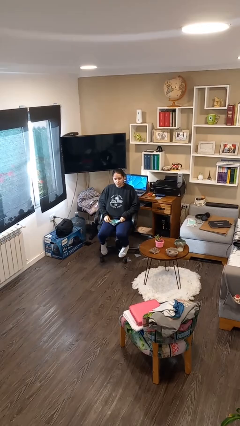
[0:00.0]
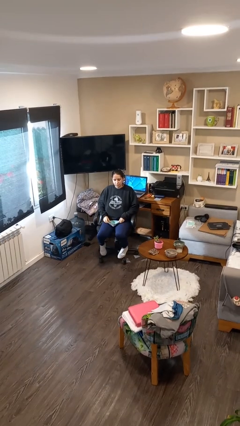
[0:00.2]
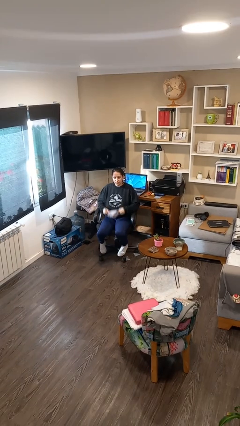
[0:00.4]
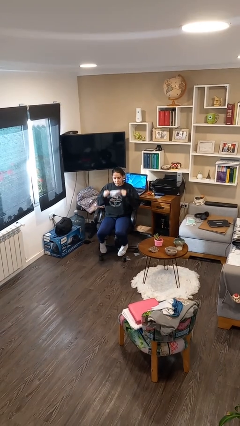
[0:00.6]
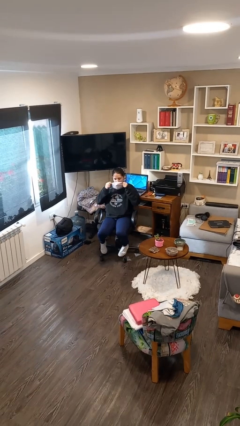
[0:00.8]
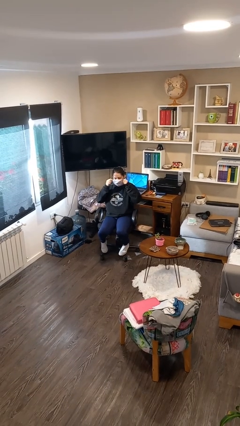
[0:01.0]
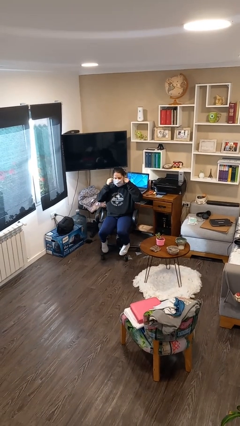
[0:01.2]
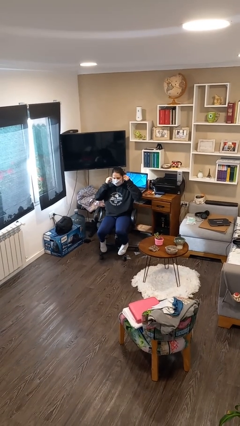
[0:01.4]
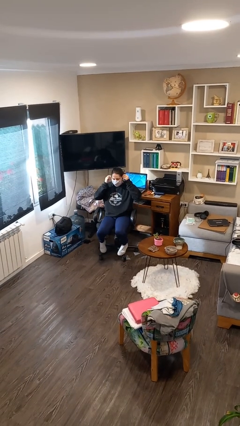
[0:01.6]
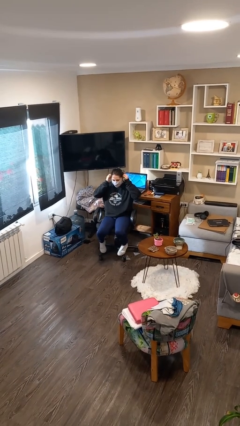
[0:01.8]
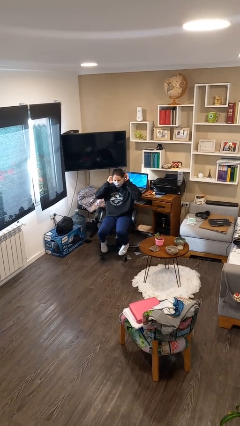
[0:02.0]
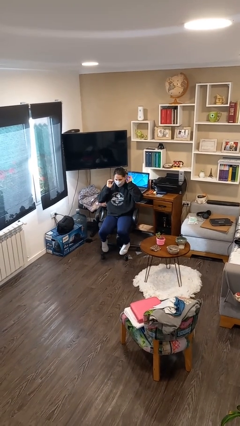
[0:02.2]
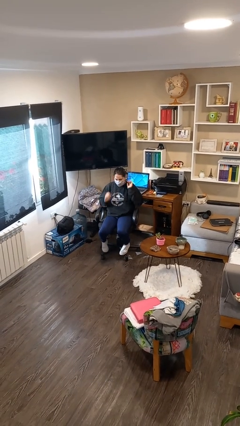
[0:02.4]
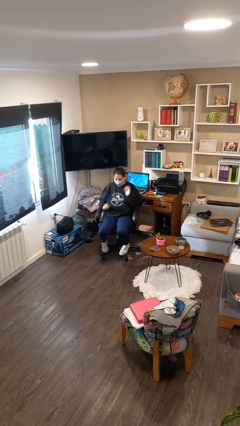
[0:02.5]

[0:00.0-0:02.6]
person puts on facemask

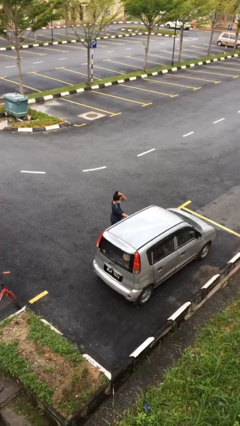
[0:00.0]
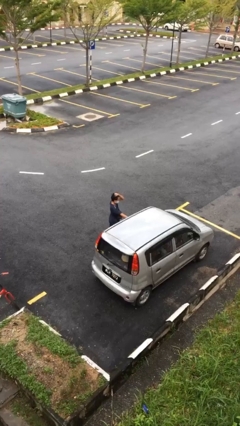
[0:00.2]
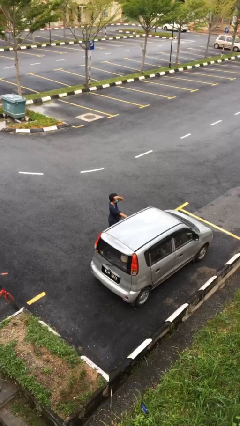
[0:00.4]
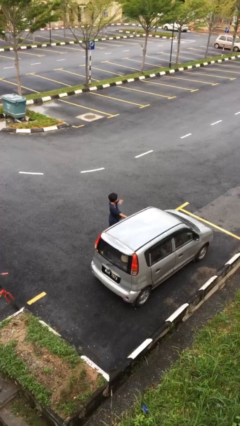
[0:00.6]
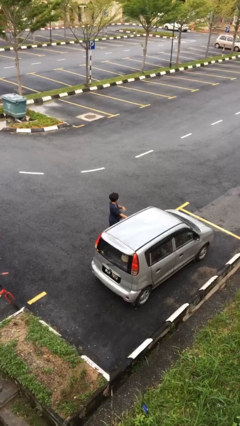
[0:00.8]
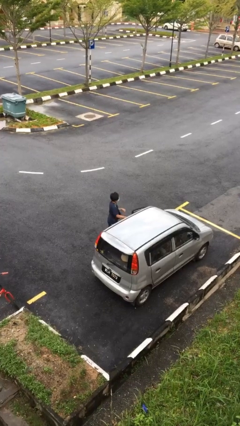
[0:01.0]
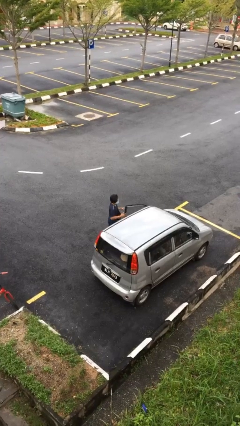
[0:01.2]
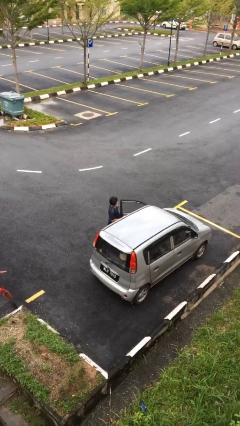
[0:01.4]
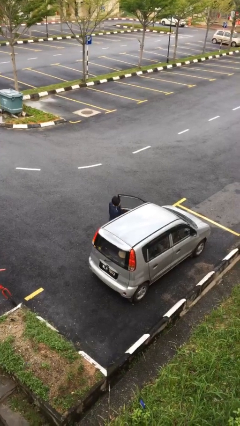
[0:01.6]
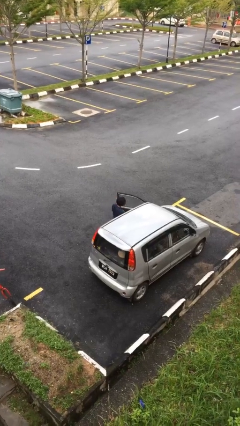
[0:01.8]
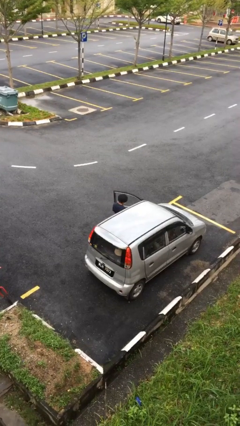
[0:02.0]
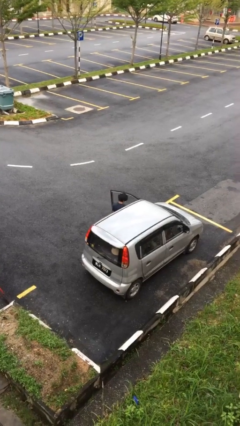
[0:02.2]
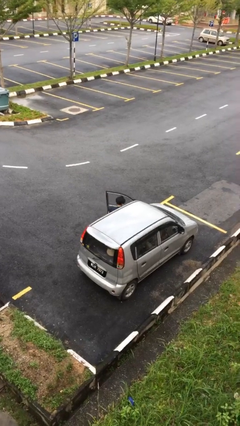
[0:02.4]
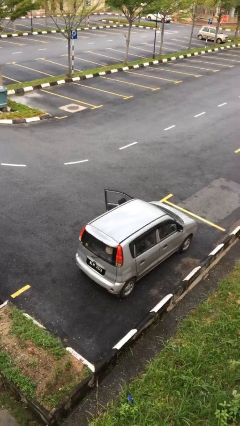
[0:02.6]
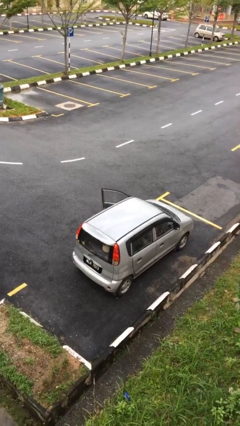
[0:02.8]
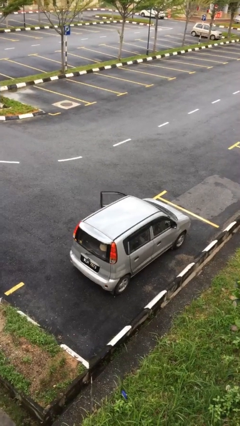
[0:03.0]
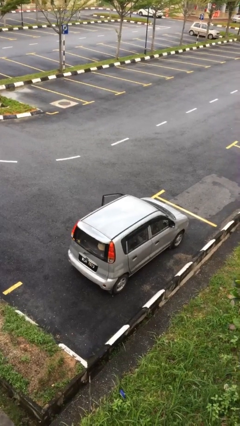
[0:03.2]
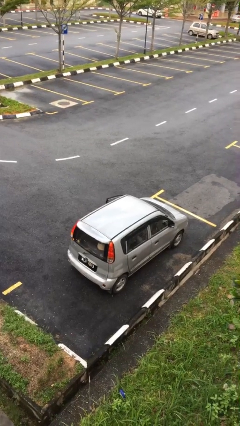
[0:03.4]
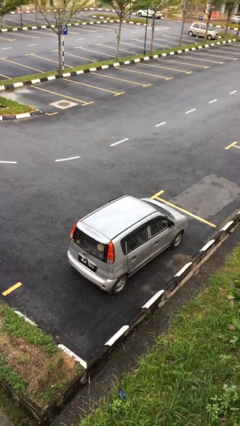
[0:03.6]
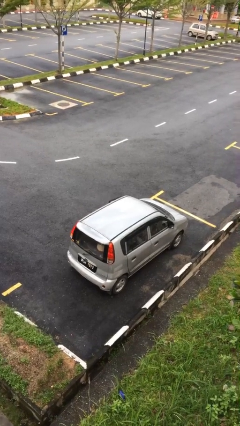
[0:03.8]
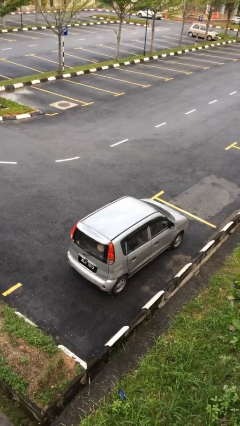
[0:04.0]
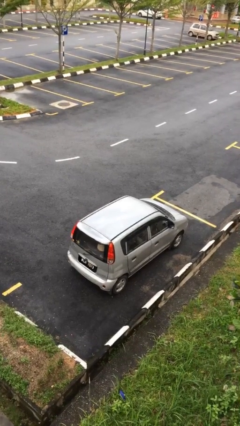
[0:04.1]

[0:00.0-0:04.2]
person enters car

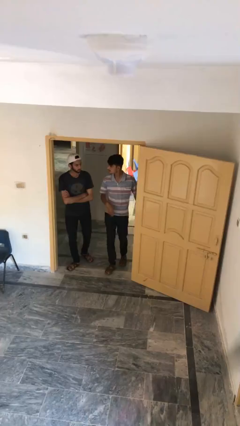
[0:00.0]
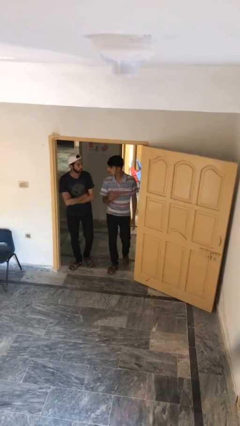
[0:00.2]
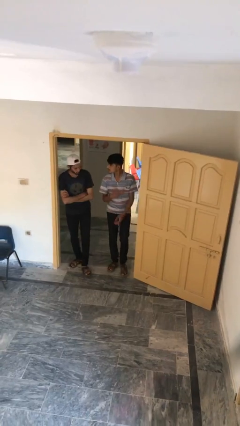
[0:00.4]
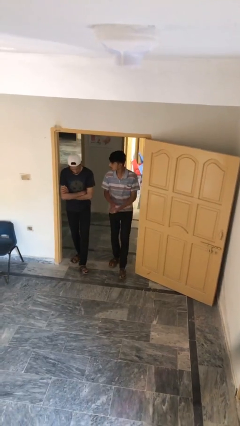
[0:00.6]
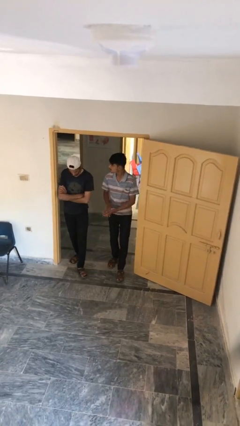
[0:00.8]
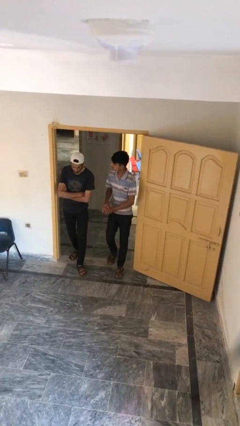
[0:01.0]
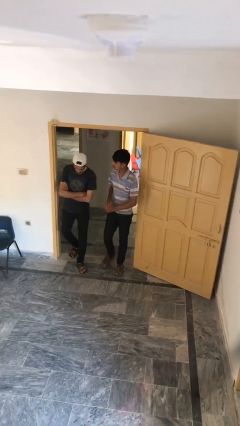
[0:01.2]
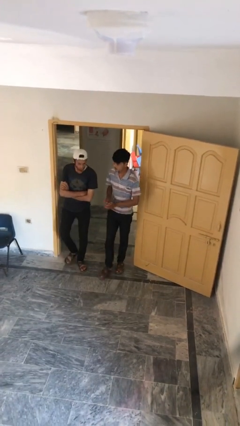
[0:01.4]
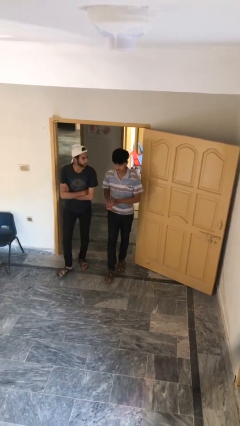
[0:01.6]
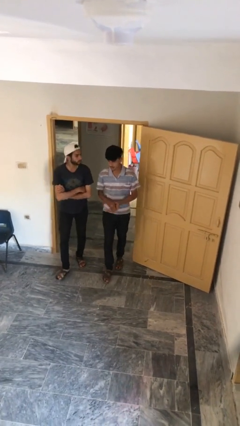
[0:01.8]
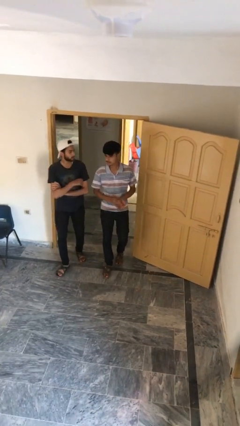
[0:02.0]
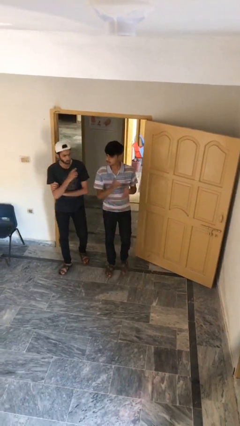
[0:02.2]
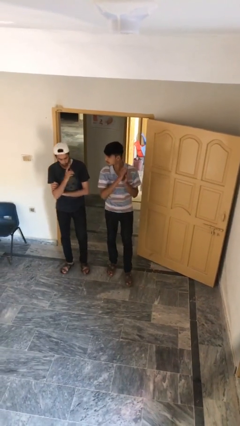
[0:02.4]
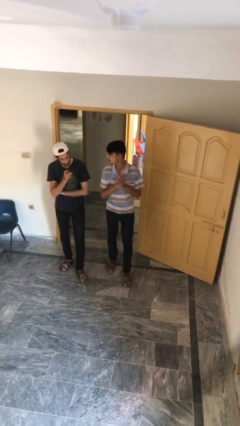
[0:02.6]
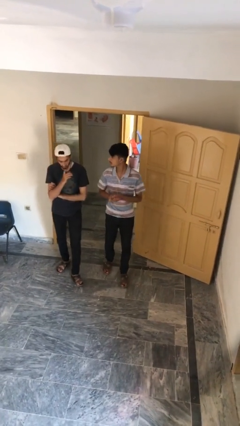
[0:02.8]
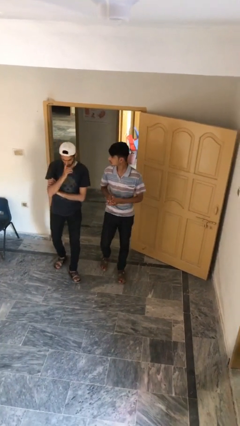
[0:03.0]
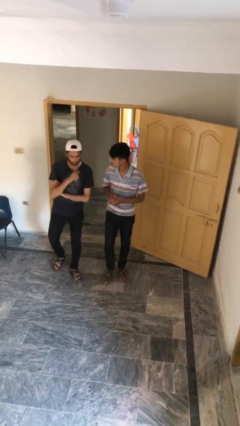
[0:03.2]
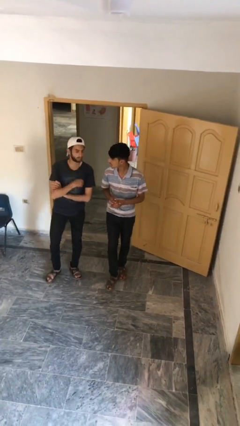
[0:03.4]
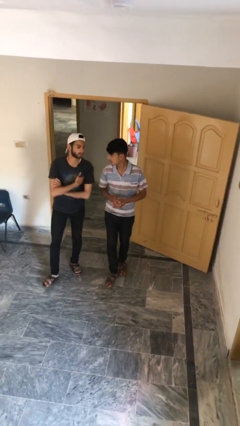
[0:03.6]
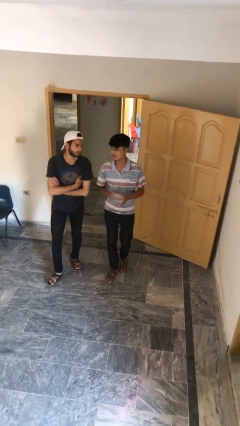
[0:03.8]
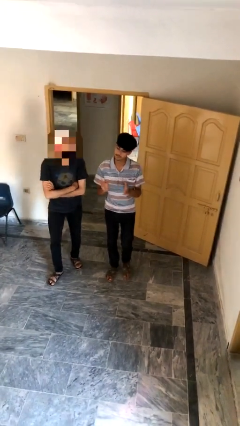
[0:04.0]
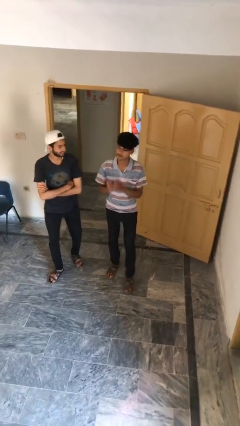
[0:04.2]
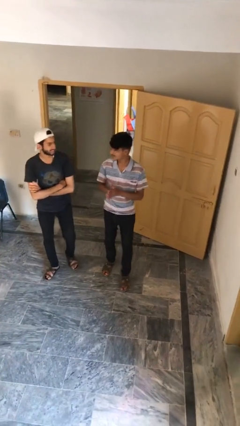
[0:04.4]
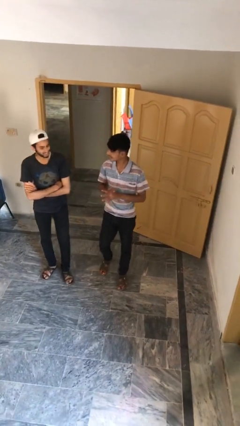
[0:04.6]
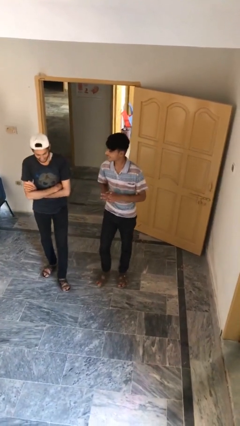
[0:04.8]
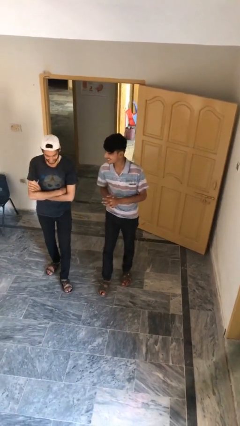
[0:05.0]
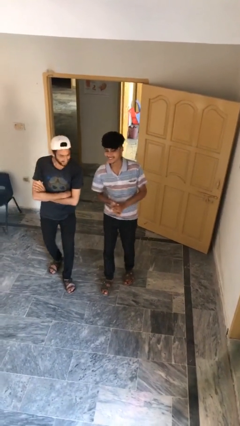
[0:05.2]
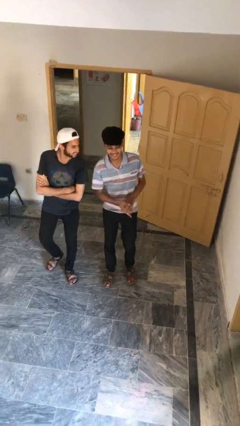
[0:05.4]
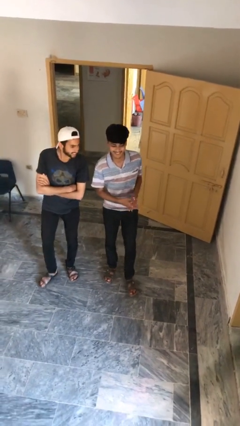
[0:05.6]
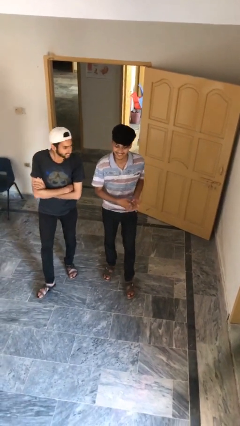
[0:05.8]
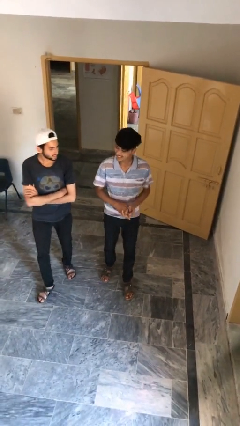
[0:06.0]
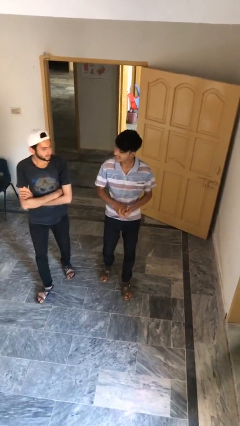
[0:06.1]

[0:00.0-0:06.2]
person talks to person

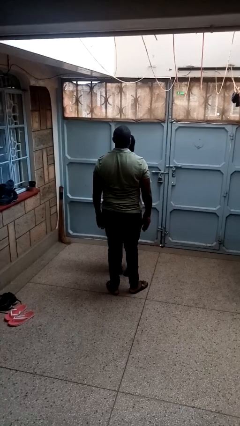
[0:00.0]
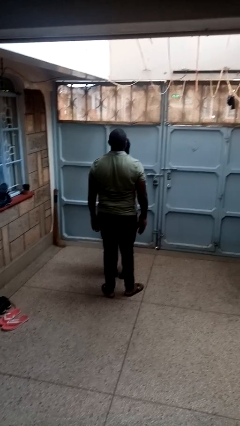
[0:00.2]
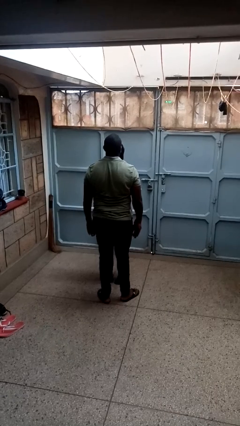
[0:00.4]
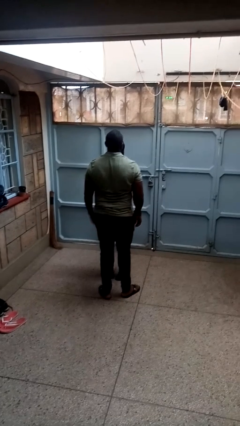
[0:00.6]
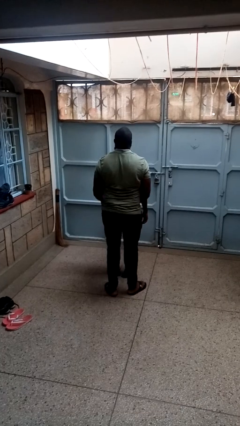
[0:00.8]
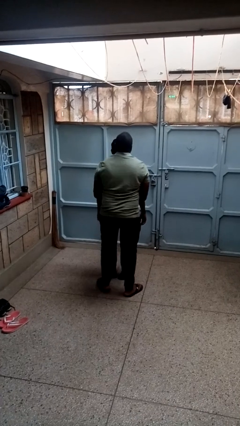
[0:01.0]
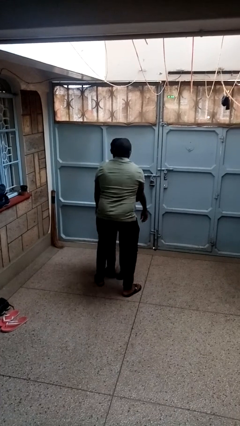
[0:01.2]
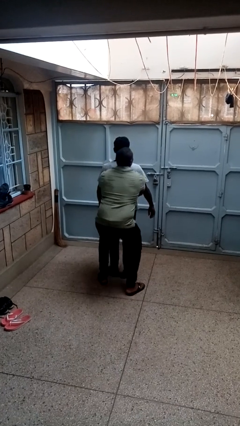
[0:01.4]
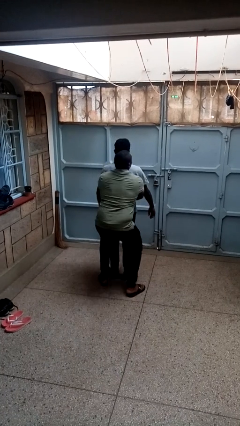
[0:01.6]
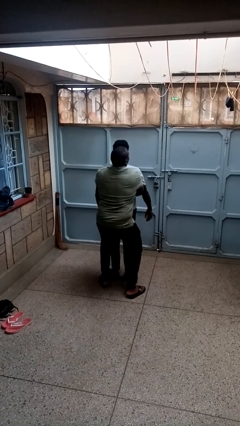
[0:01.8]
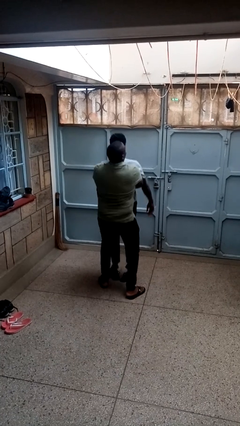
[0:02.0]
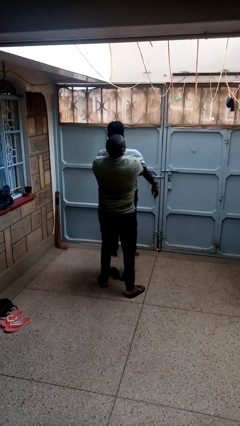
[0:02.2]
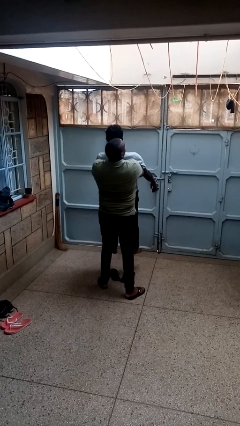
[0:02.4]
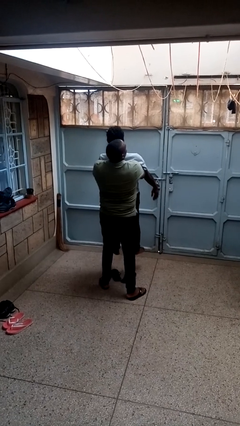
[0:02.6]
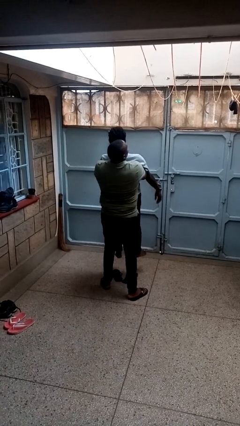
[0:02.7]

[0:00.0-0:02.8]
person picks up person

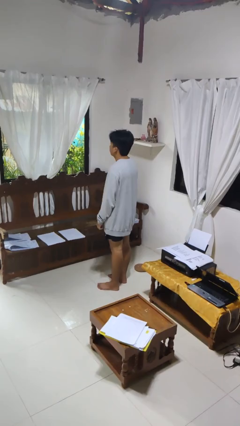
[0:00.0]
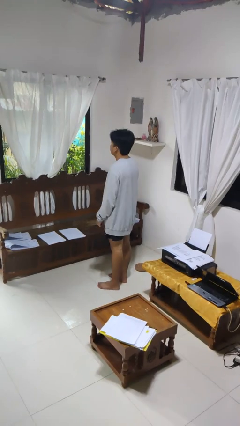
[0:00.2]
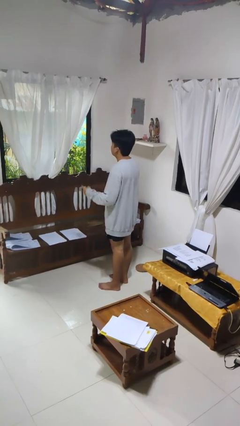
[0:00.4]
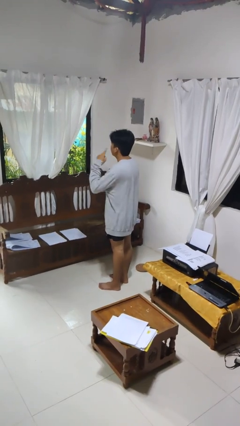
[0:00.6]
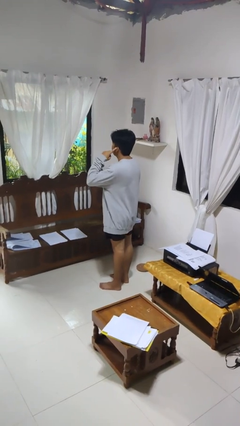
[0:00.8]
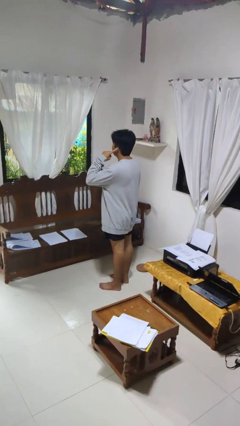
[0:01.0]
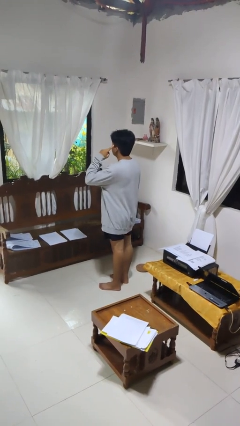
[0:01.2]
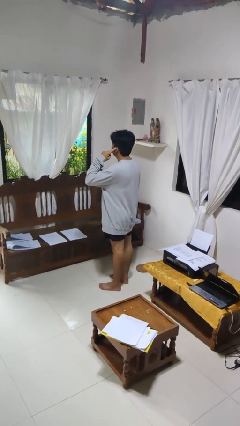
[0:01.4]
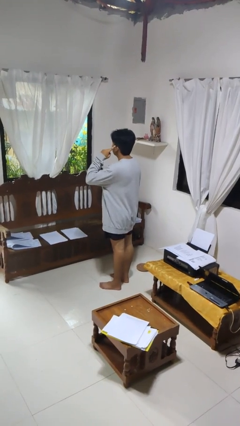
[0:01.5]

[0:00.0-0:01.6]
person gestures listen closely
